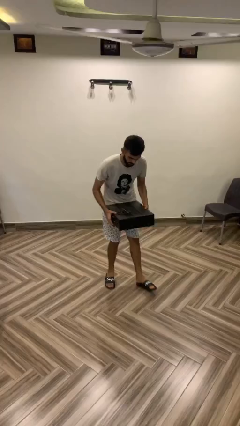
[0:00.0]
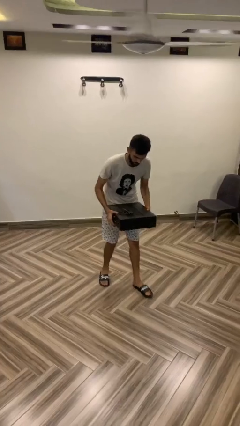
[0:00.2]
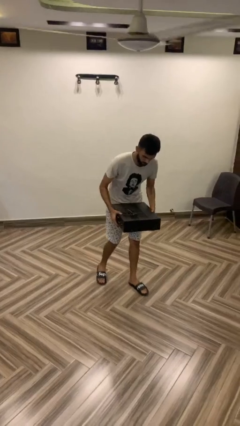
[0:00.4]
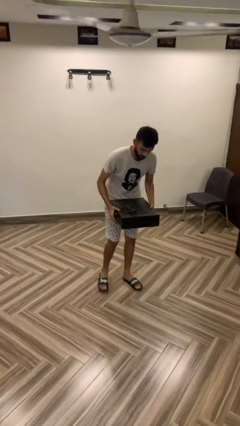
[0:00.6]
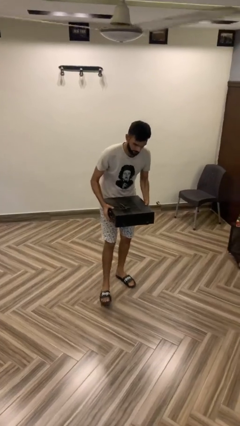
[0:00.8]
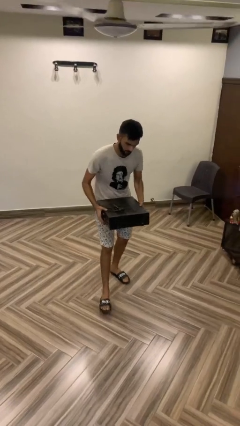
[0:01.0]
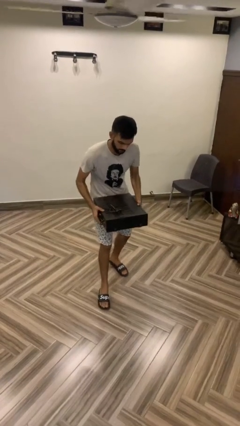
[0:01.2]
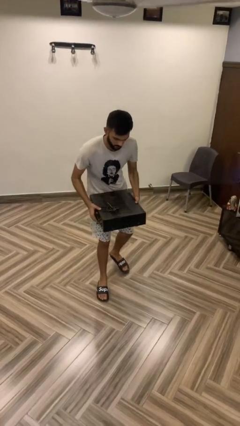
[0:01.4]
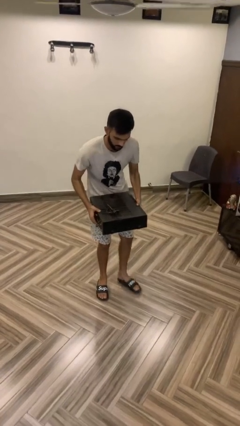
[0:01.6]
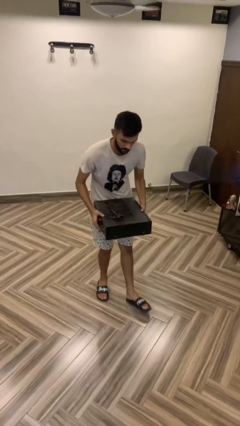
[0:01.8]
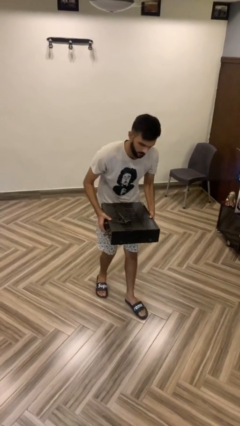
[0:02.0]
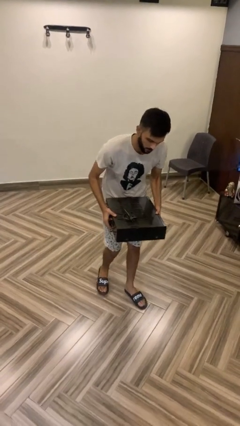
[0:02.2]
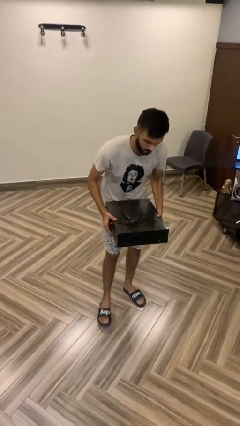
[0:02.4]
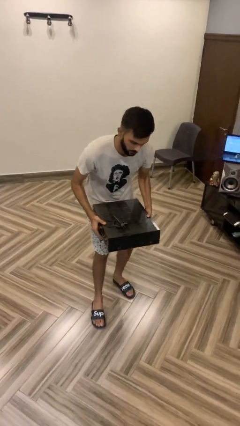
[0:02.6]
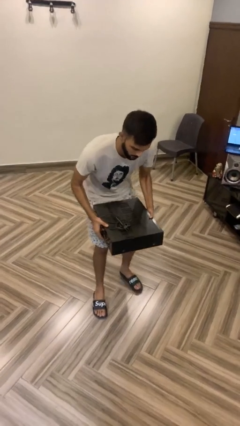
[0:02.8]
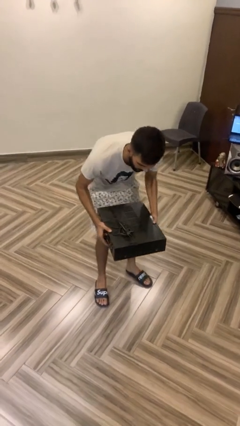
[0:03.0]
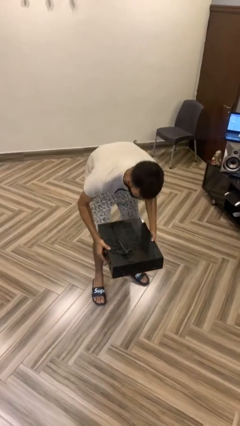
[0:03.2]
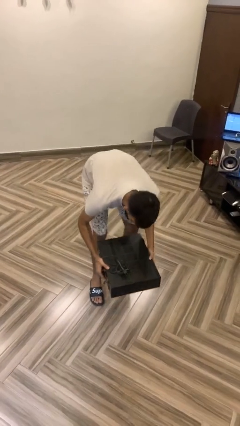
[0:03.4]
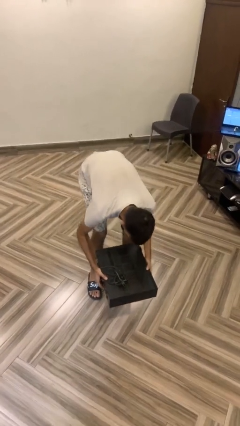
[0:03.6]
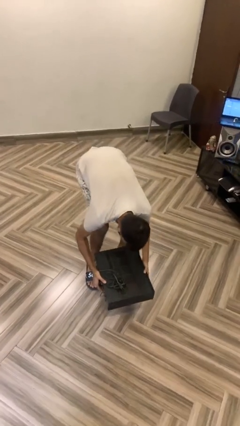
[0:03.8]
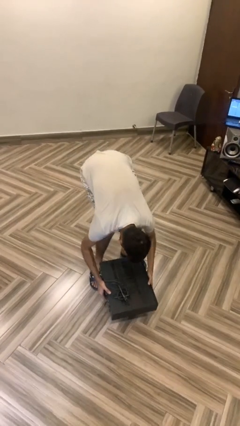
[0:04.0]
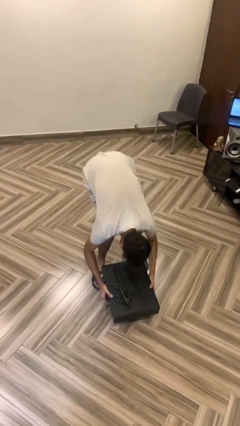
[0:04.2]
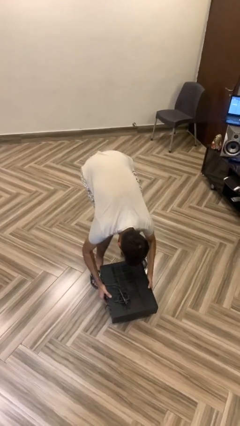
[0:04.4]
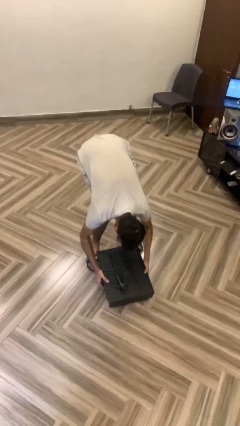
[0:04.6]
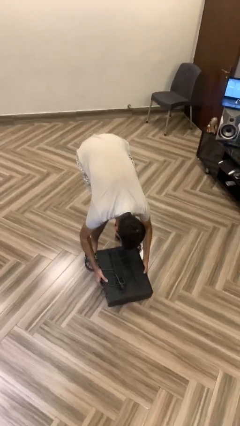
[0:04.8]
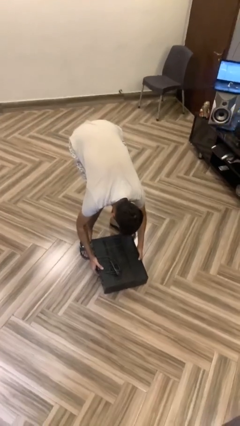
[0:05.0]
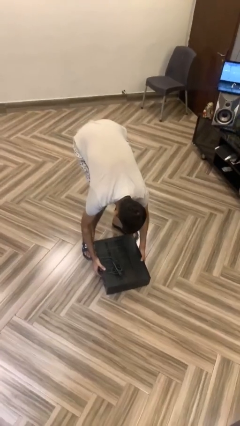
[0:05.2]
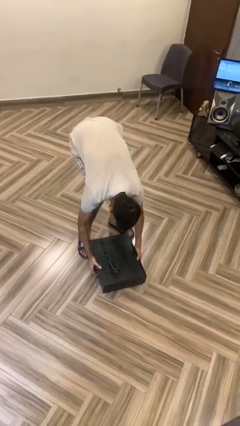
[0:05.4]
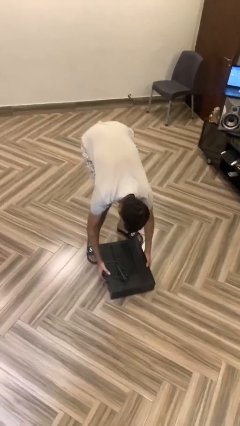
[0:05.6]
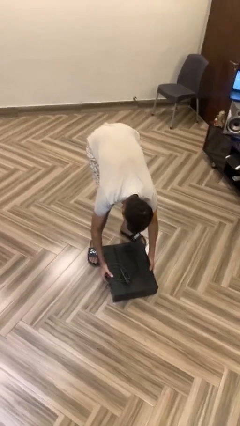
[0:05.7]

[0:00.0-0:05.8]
person puts down object on floor

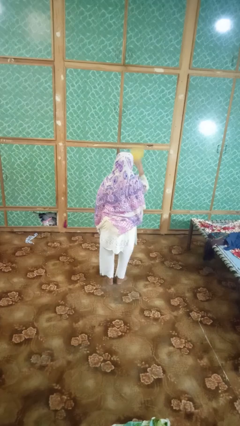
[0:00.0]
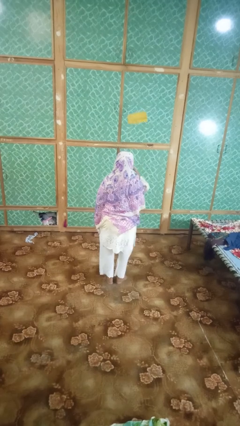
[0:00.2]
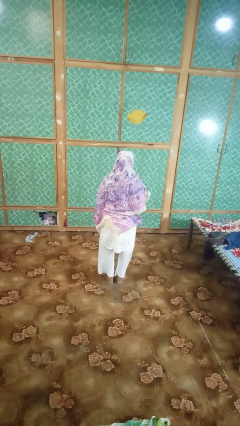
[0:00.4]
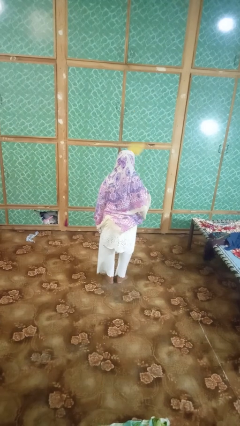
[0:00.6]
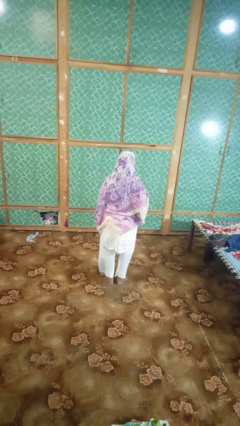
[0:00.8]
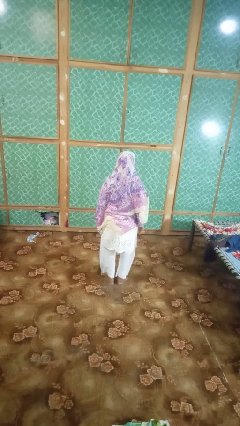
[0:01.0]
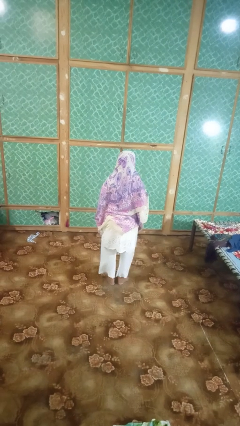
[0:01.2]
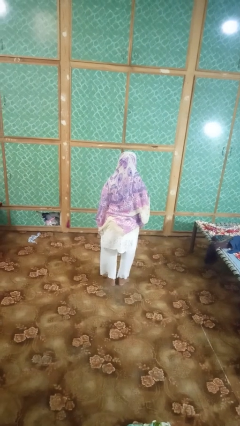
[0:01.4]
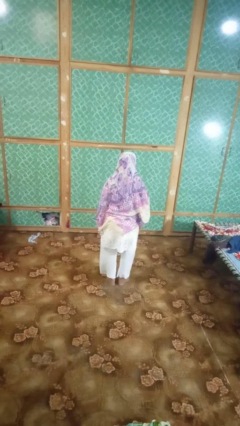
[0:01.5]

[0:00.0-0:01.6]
person throws object into air

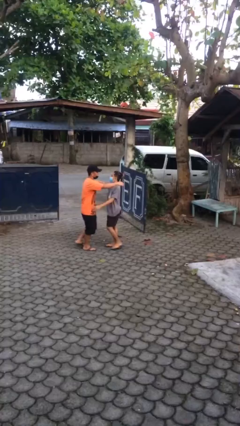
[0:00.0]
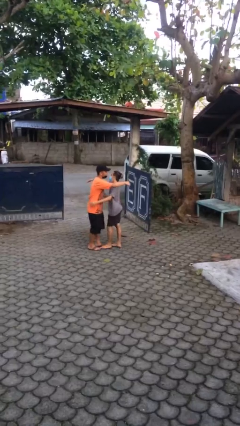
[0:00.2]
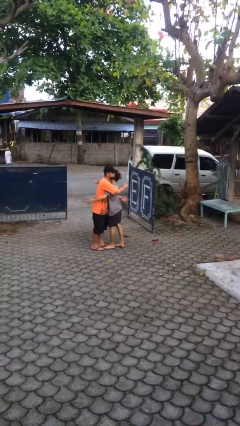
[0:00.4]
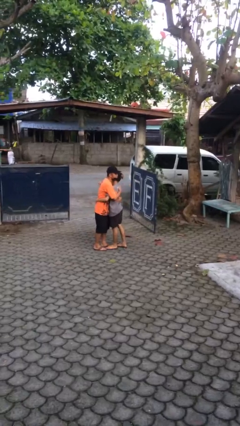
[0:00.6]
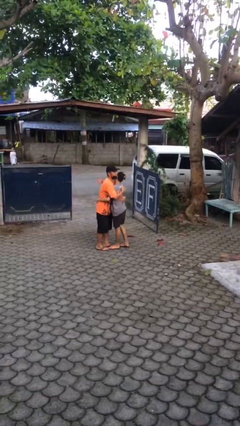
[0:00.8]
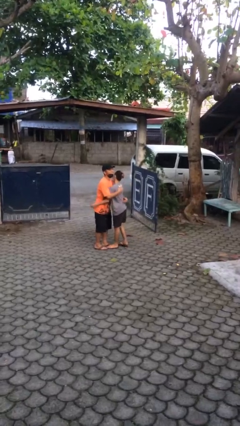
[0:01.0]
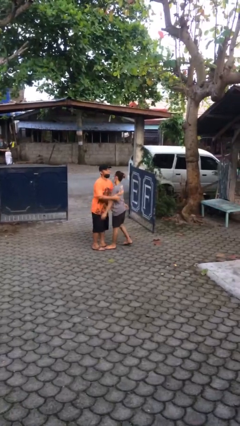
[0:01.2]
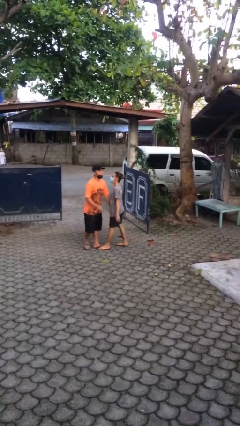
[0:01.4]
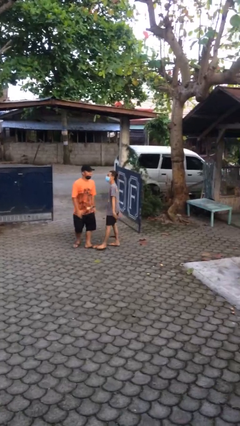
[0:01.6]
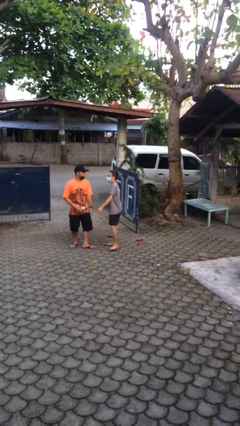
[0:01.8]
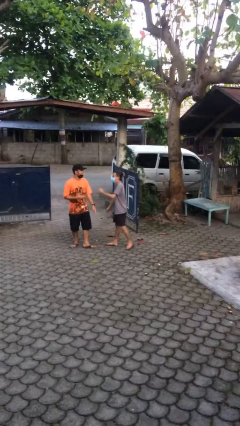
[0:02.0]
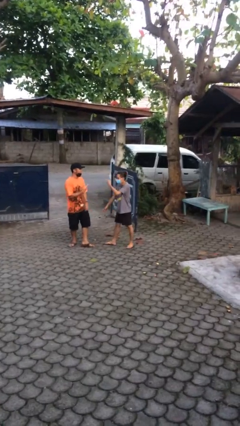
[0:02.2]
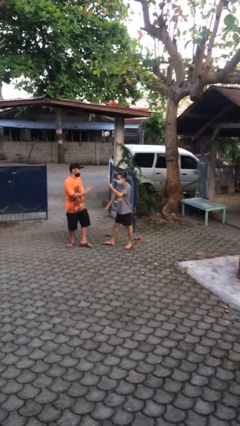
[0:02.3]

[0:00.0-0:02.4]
person embraces person

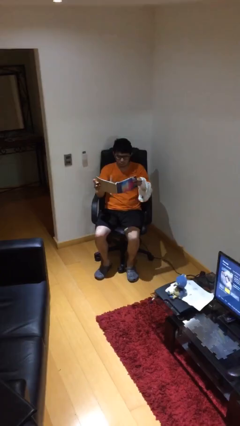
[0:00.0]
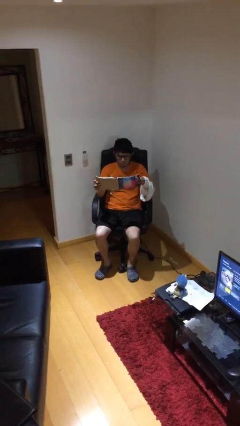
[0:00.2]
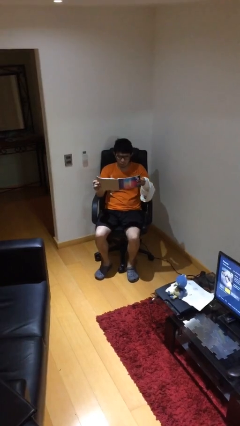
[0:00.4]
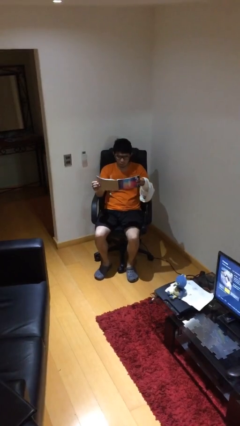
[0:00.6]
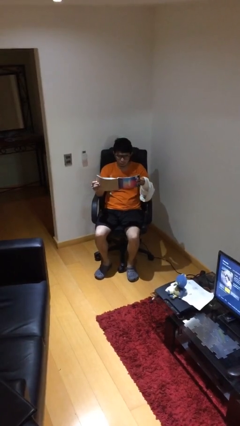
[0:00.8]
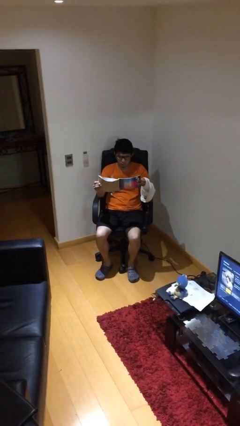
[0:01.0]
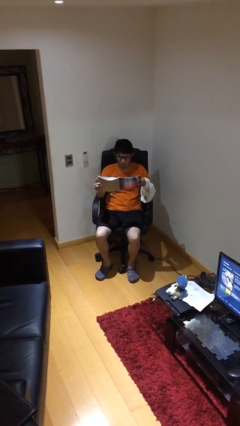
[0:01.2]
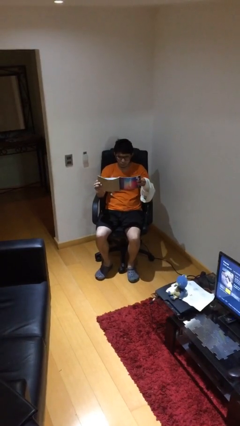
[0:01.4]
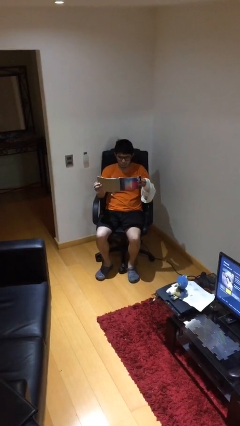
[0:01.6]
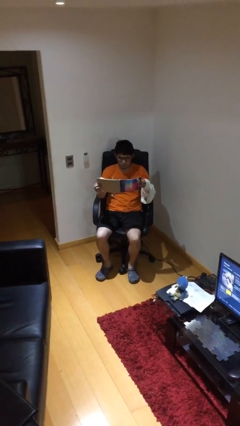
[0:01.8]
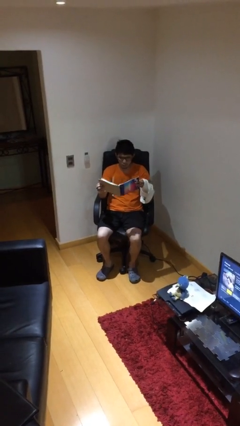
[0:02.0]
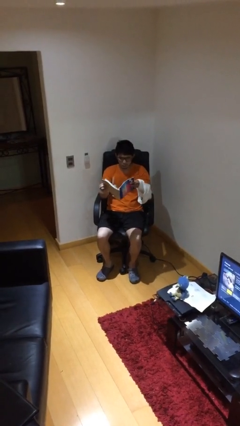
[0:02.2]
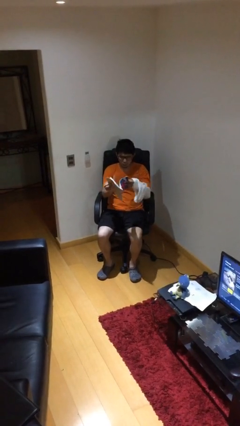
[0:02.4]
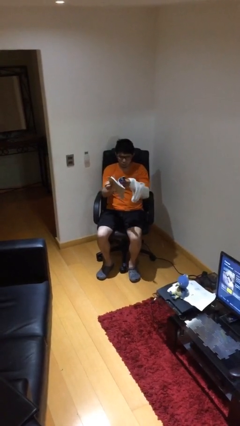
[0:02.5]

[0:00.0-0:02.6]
person reads document

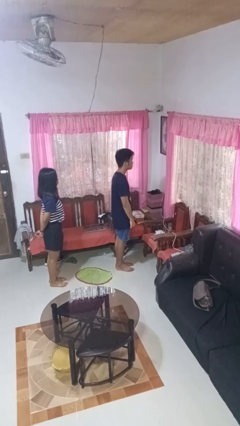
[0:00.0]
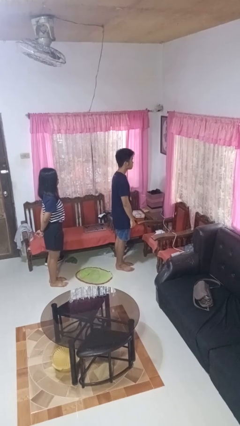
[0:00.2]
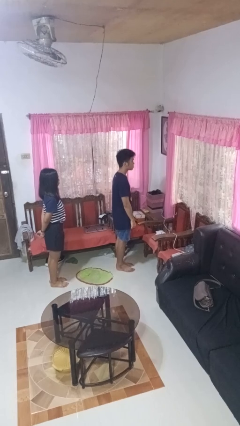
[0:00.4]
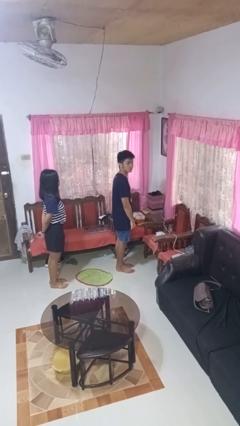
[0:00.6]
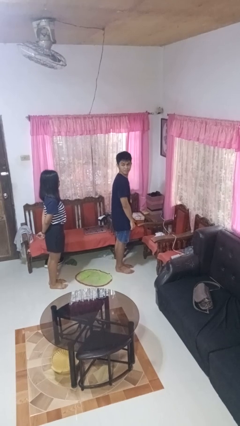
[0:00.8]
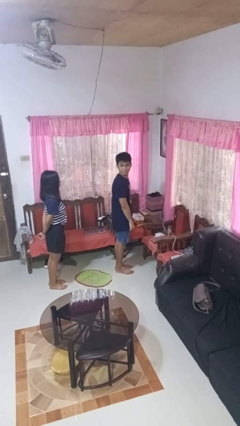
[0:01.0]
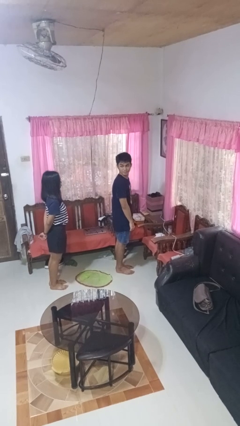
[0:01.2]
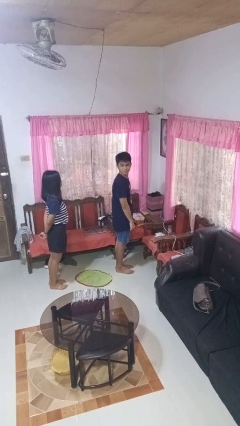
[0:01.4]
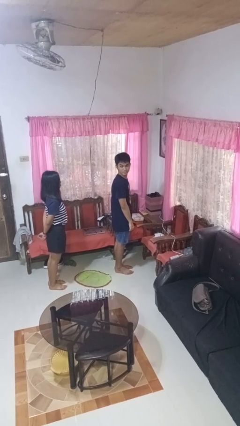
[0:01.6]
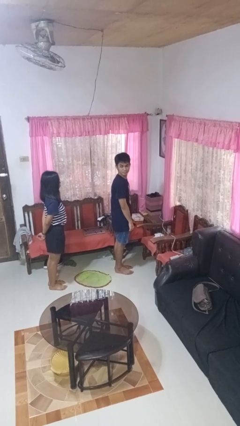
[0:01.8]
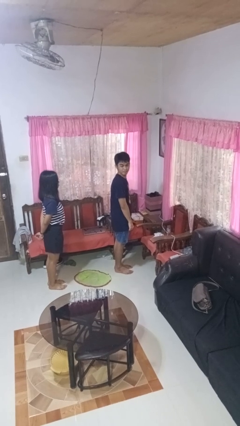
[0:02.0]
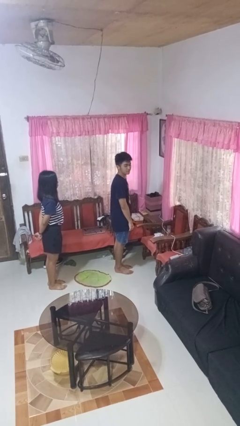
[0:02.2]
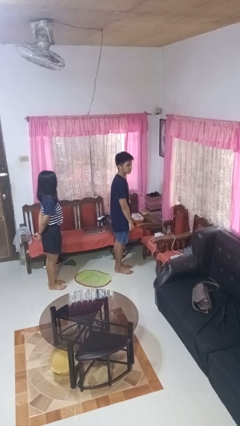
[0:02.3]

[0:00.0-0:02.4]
person looks over shoulder

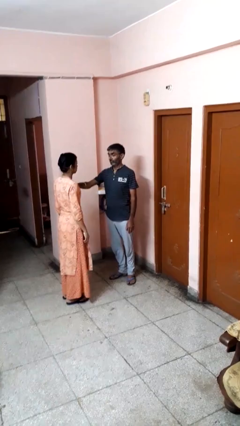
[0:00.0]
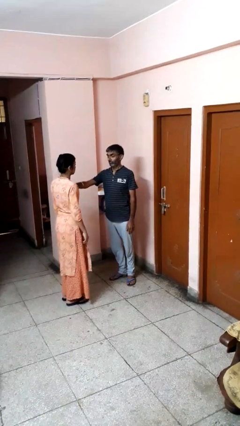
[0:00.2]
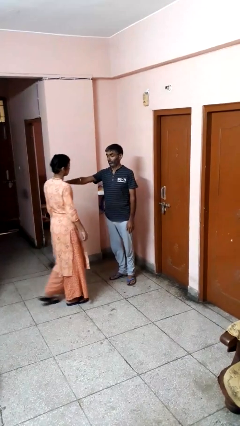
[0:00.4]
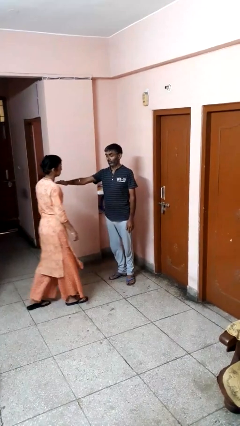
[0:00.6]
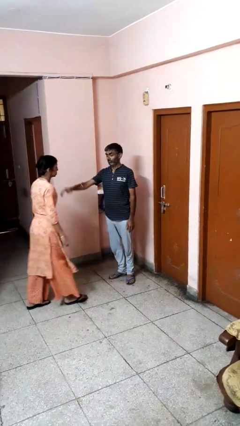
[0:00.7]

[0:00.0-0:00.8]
person shoves person

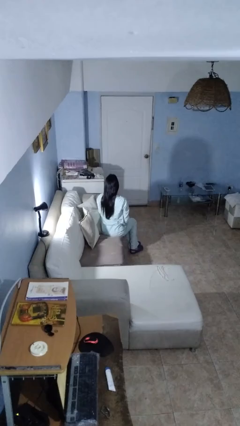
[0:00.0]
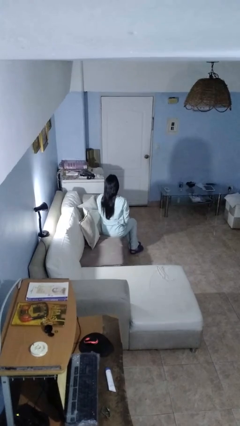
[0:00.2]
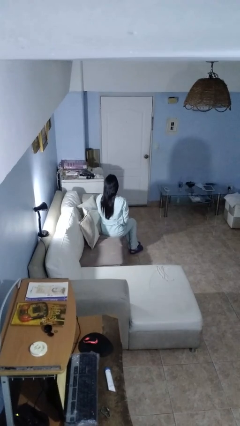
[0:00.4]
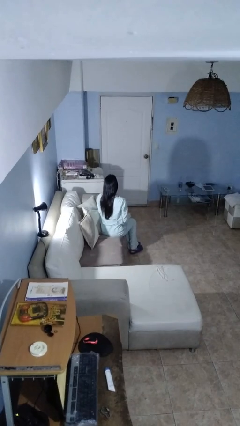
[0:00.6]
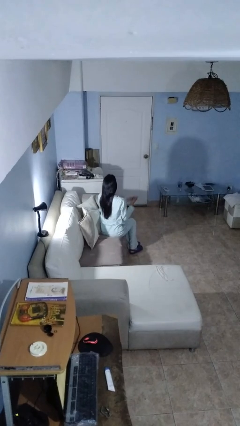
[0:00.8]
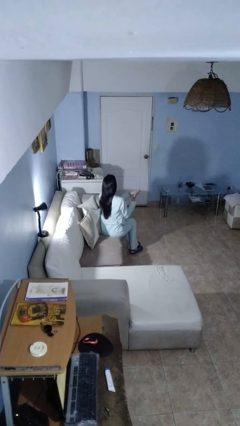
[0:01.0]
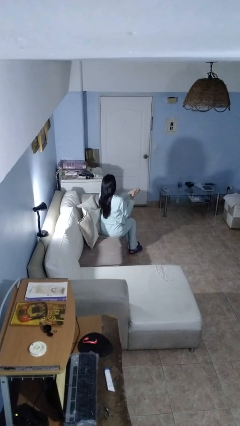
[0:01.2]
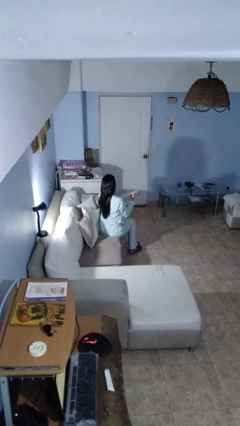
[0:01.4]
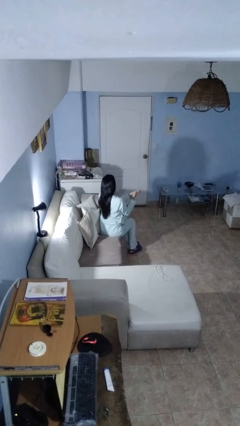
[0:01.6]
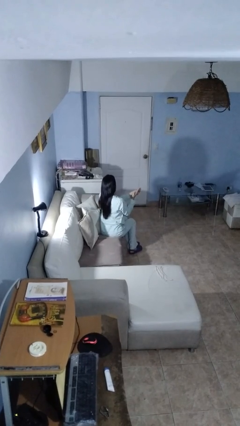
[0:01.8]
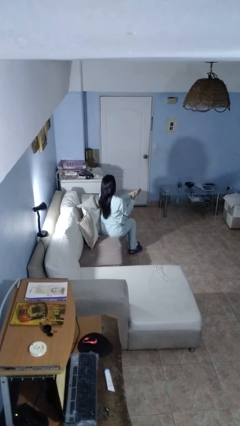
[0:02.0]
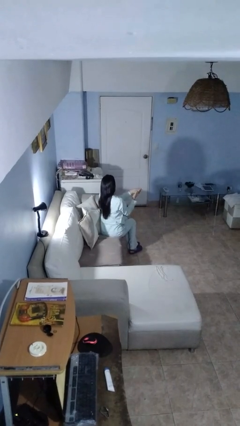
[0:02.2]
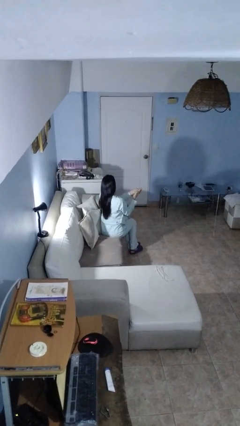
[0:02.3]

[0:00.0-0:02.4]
person snaps fingers
